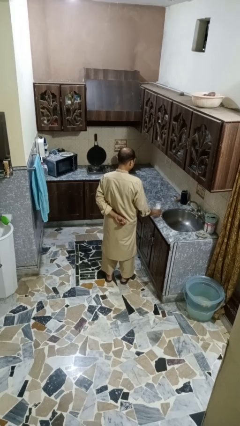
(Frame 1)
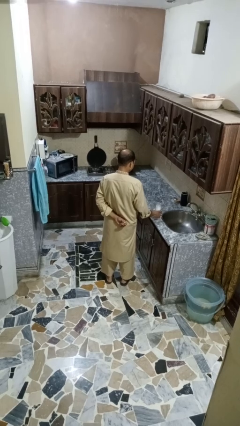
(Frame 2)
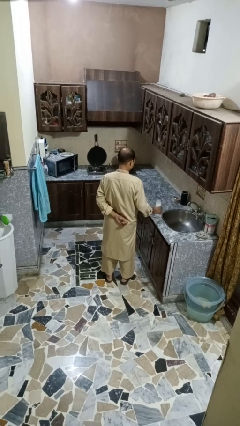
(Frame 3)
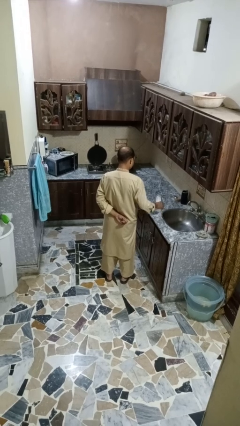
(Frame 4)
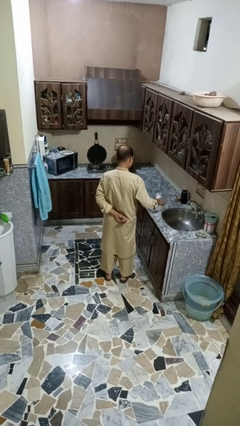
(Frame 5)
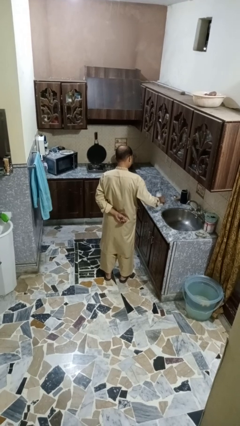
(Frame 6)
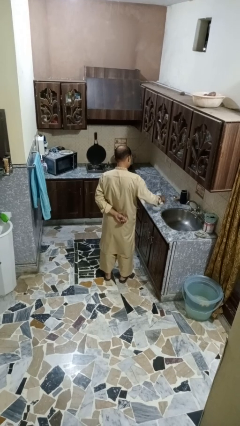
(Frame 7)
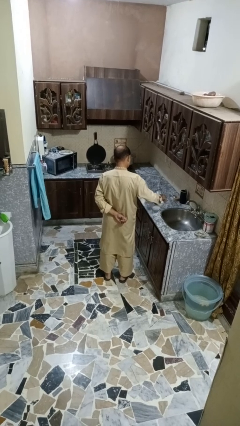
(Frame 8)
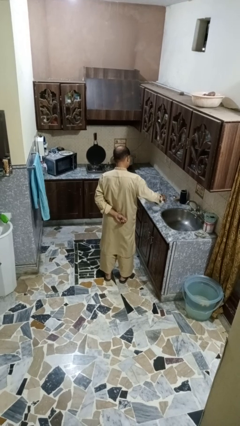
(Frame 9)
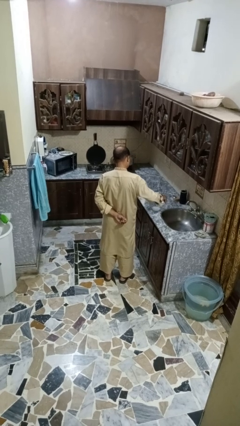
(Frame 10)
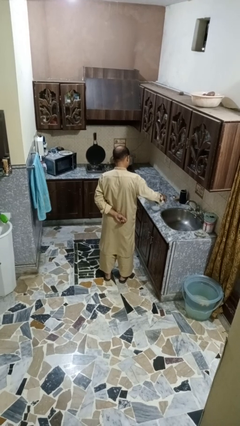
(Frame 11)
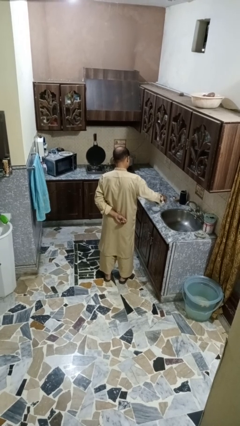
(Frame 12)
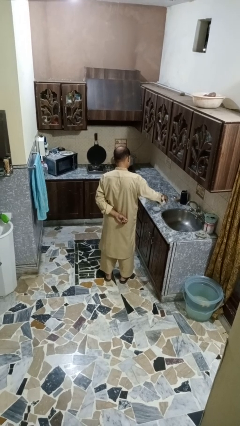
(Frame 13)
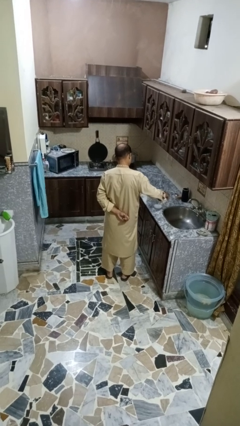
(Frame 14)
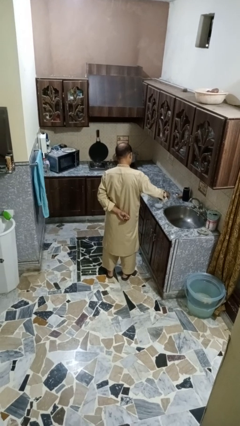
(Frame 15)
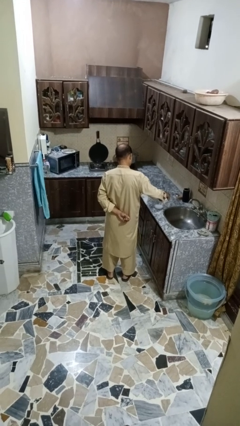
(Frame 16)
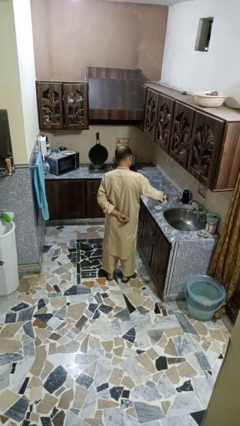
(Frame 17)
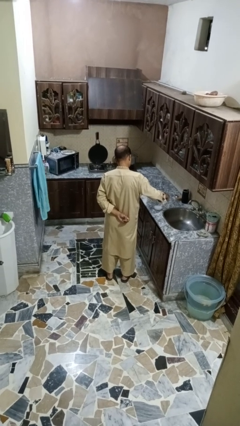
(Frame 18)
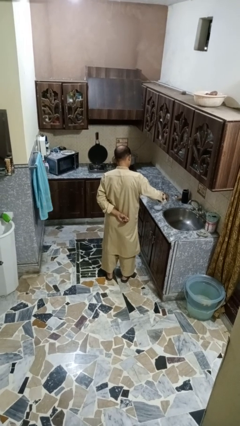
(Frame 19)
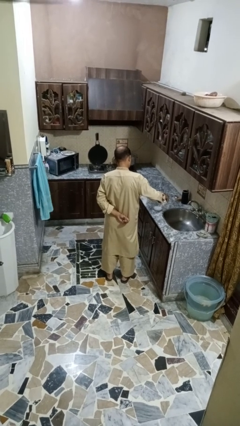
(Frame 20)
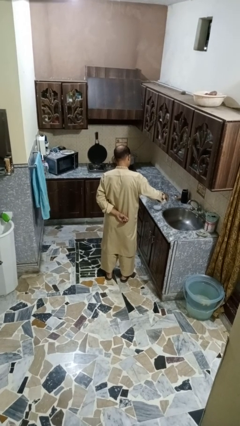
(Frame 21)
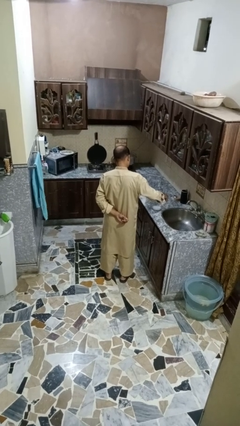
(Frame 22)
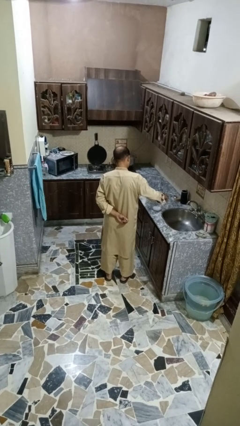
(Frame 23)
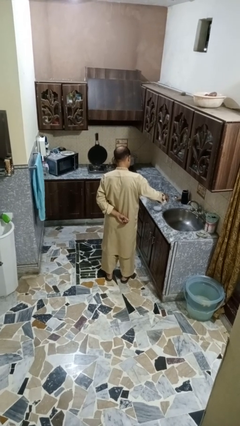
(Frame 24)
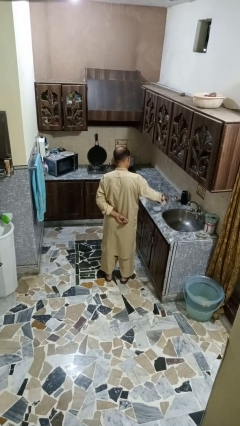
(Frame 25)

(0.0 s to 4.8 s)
person pours into bowl

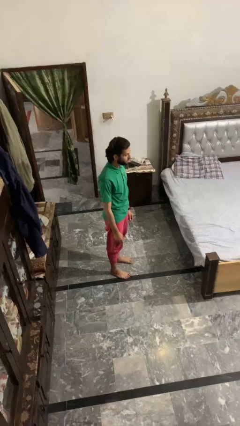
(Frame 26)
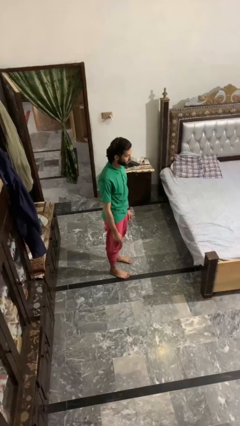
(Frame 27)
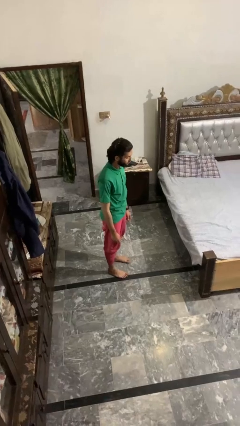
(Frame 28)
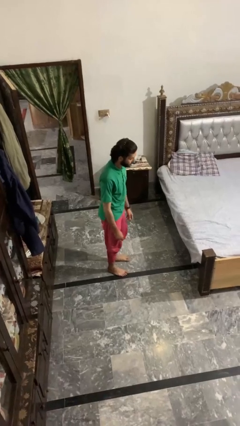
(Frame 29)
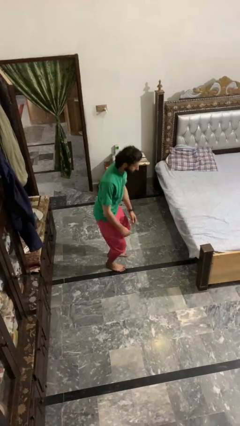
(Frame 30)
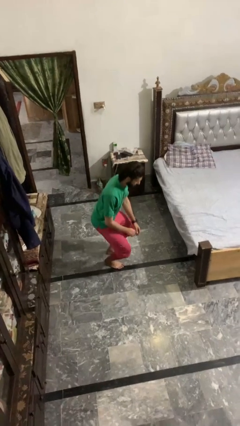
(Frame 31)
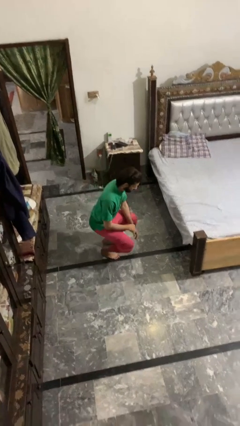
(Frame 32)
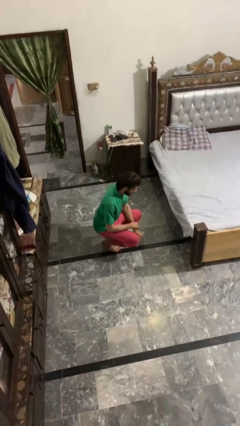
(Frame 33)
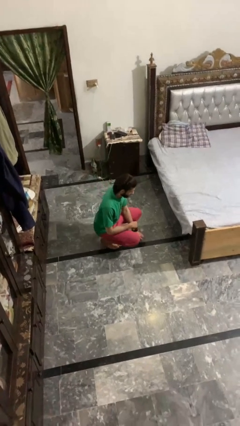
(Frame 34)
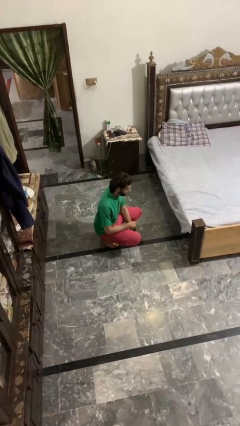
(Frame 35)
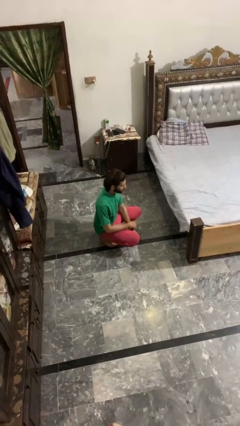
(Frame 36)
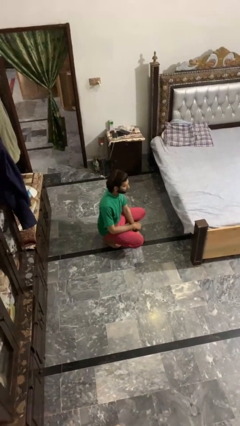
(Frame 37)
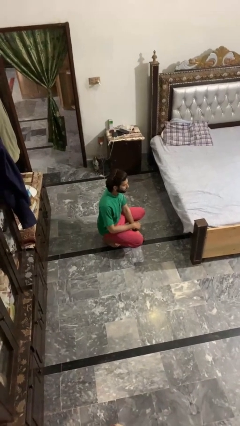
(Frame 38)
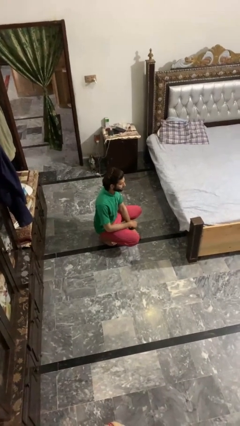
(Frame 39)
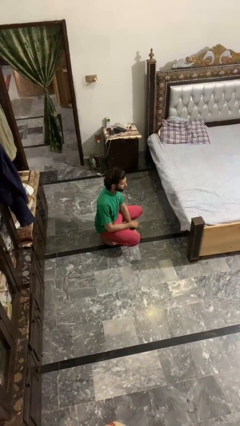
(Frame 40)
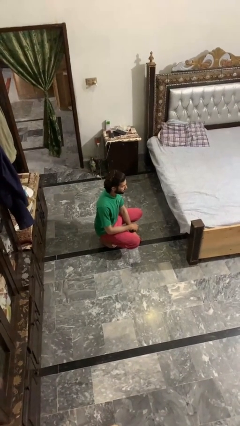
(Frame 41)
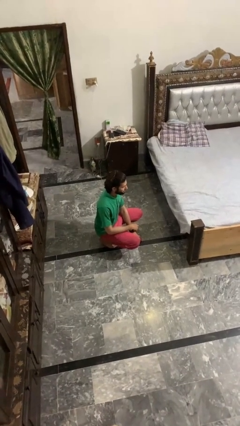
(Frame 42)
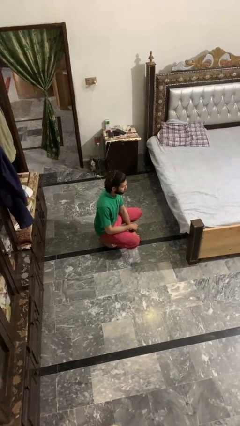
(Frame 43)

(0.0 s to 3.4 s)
person squats

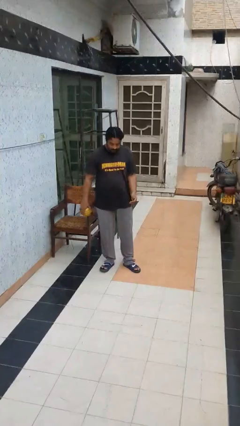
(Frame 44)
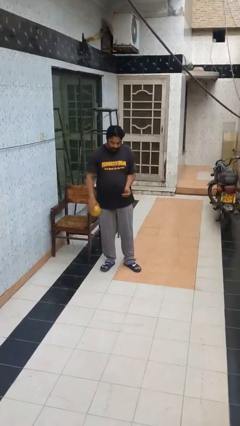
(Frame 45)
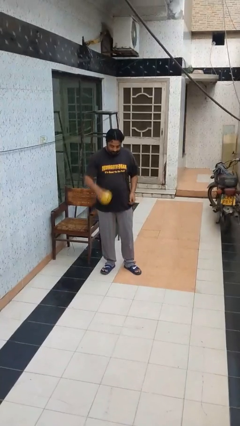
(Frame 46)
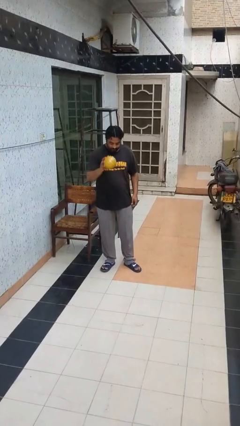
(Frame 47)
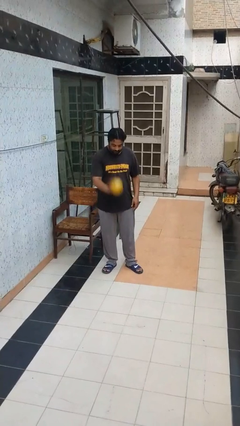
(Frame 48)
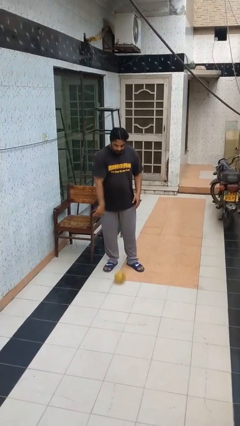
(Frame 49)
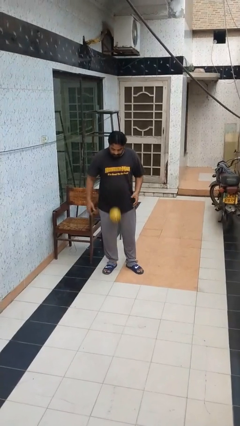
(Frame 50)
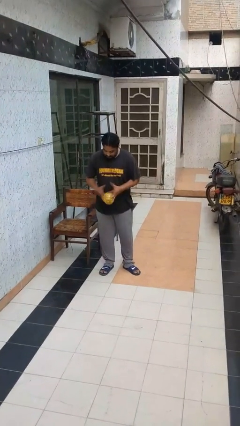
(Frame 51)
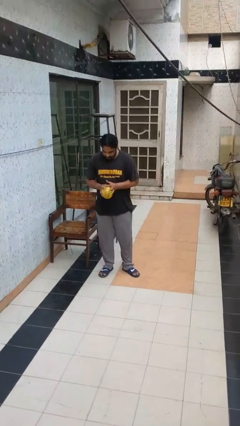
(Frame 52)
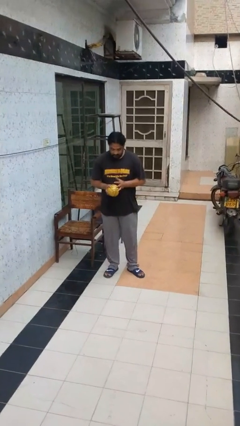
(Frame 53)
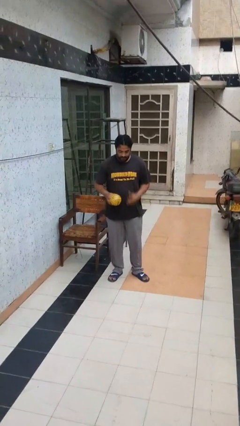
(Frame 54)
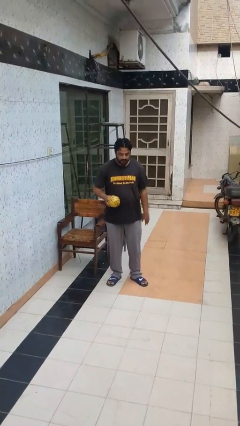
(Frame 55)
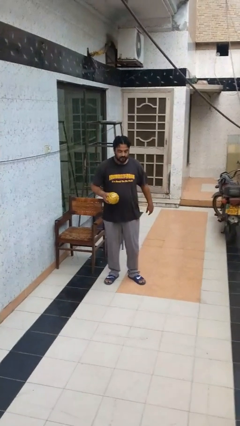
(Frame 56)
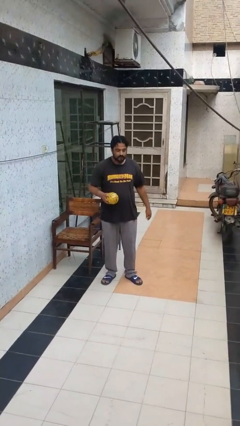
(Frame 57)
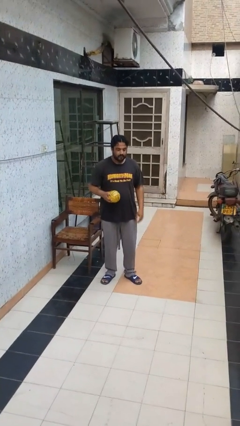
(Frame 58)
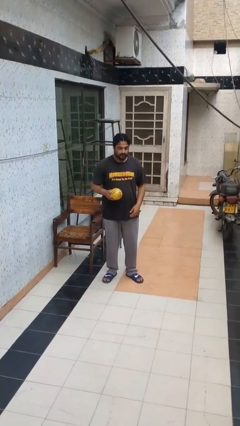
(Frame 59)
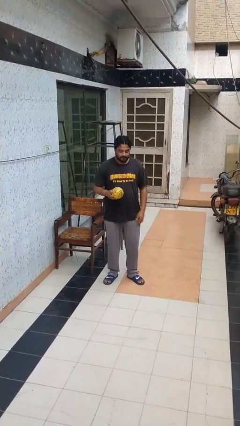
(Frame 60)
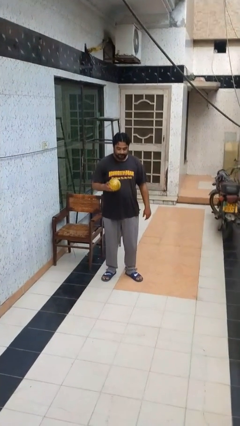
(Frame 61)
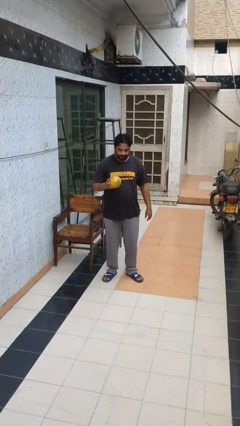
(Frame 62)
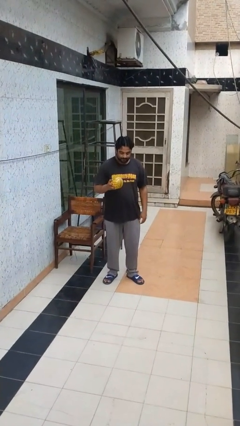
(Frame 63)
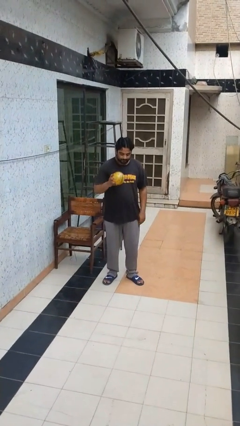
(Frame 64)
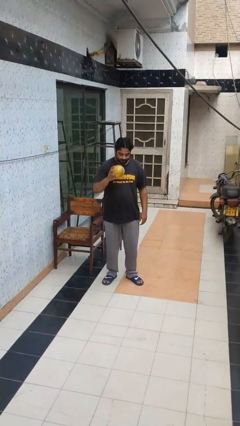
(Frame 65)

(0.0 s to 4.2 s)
person bounces ball on floor

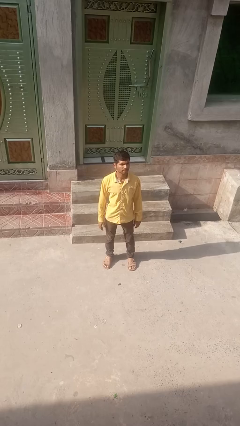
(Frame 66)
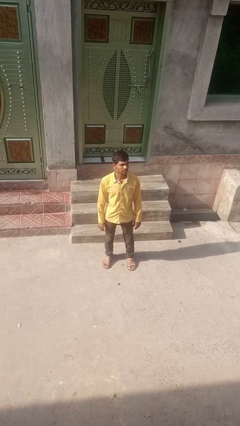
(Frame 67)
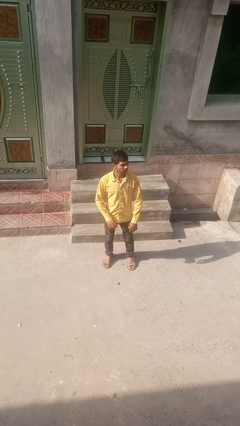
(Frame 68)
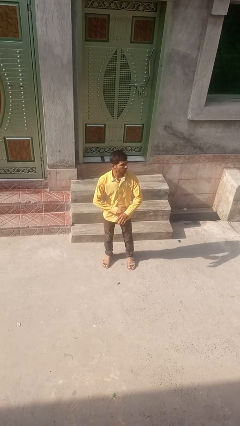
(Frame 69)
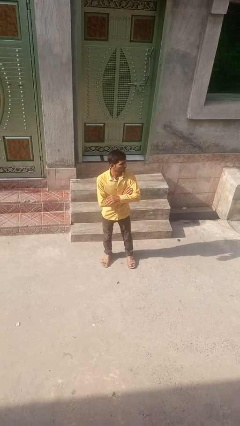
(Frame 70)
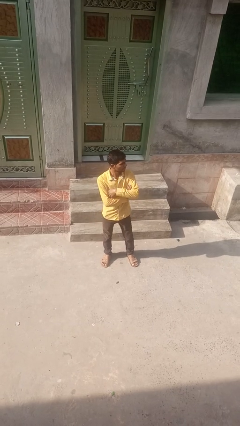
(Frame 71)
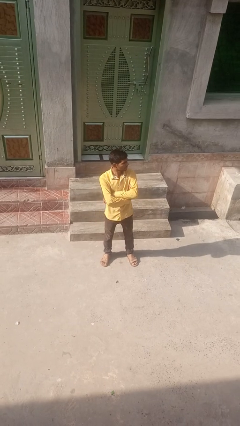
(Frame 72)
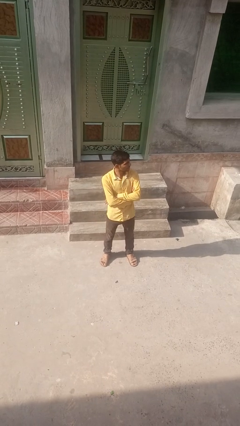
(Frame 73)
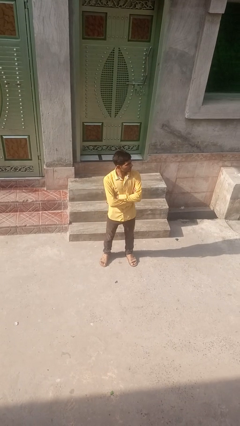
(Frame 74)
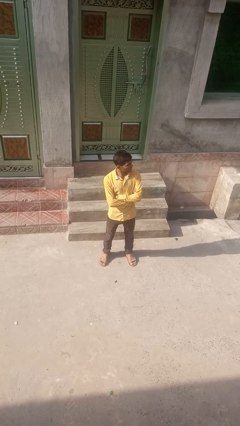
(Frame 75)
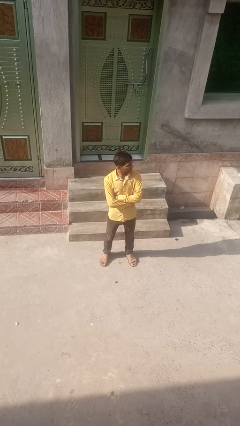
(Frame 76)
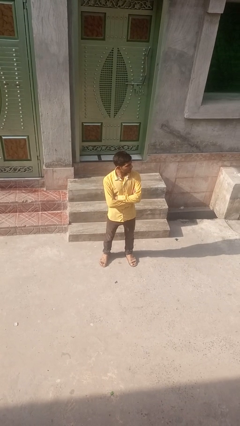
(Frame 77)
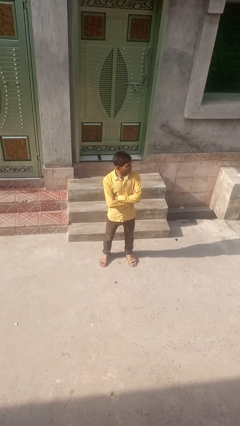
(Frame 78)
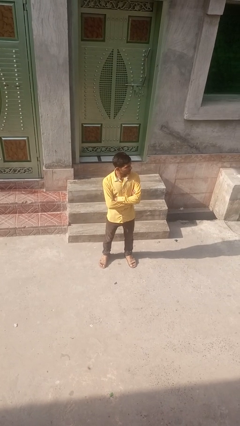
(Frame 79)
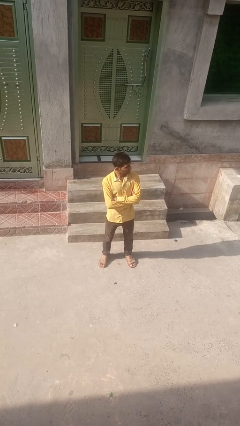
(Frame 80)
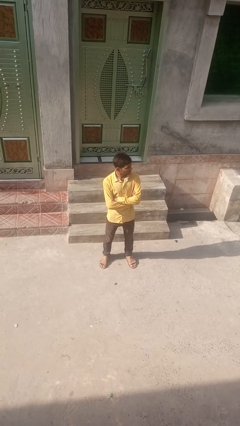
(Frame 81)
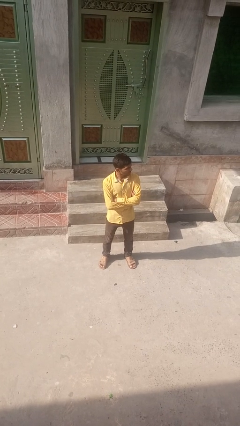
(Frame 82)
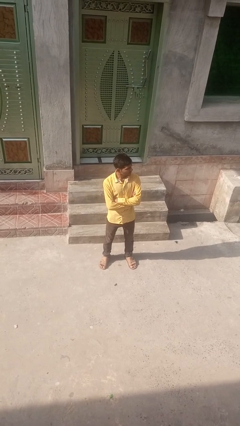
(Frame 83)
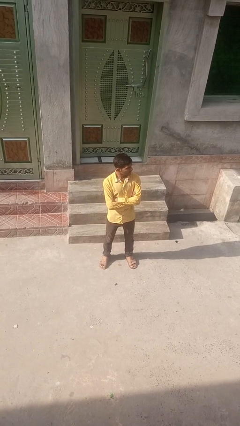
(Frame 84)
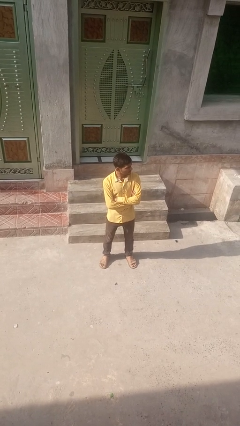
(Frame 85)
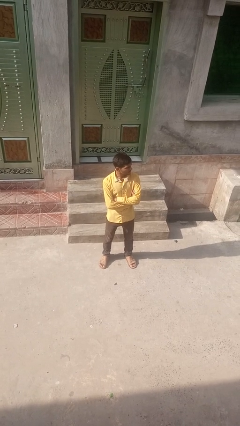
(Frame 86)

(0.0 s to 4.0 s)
person crosses arms

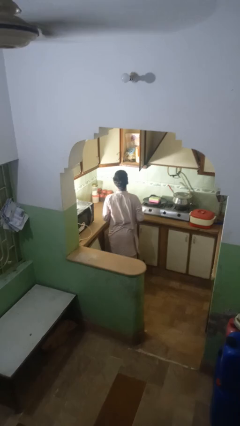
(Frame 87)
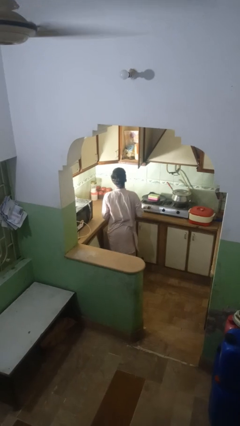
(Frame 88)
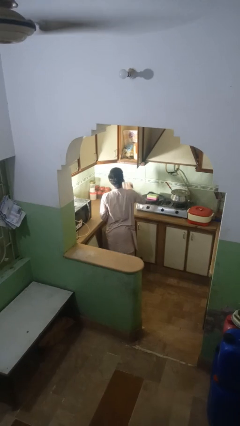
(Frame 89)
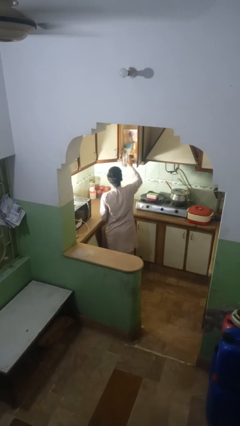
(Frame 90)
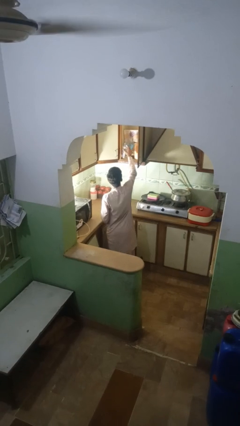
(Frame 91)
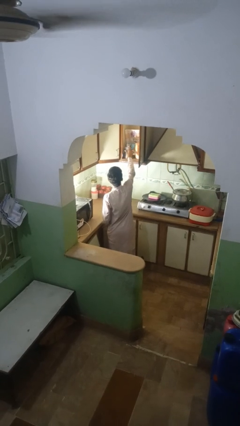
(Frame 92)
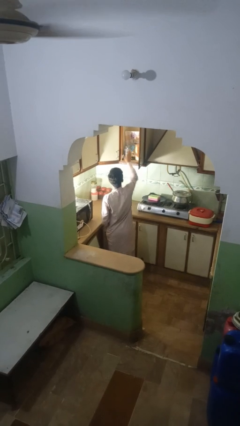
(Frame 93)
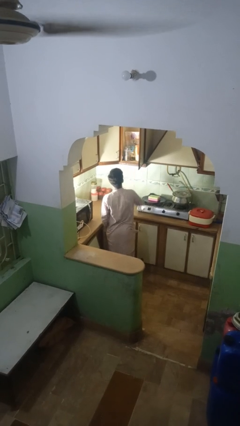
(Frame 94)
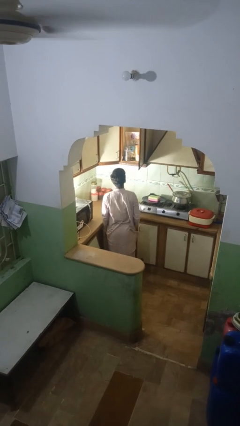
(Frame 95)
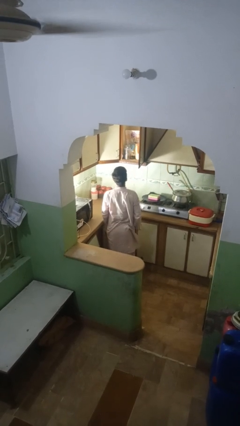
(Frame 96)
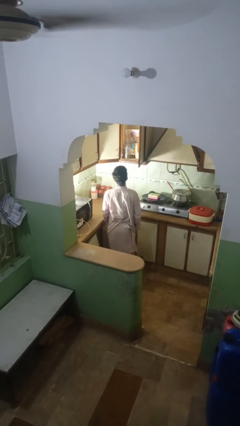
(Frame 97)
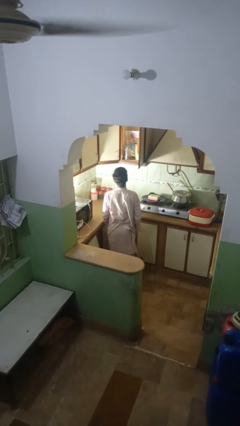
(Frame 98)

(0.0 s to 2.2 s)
person puts object into kitchen drawer
